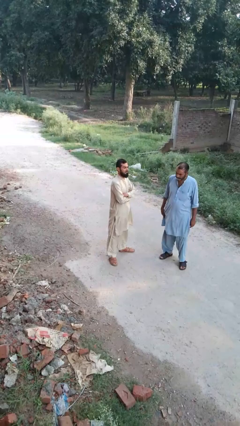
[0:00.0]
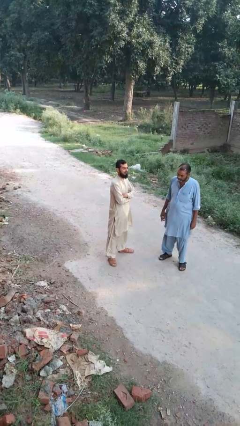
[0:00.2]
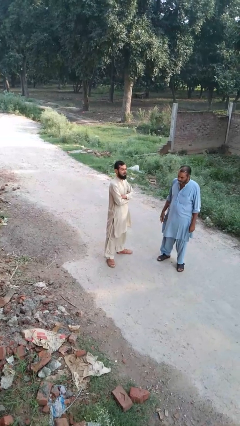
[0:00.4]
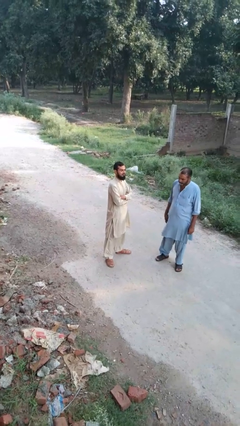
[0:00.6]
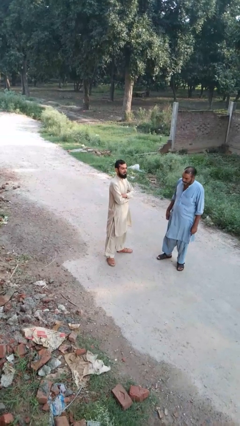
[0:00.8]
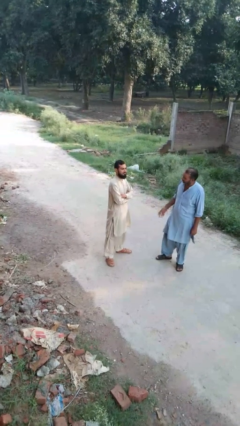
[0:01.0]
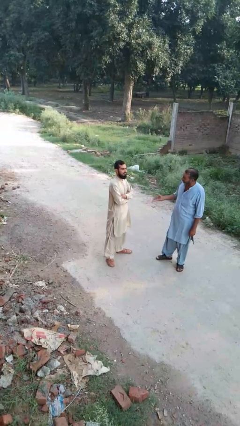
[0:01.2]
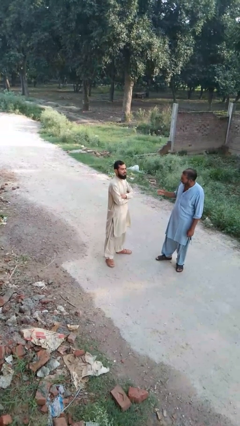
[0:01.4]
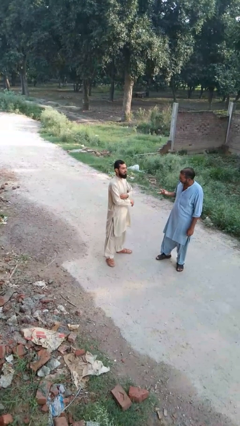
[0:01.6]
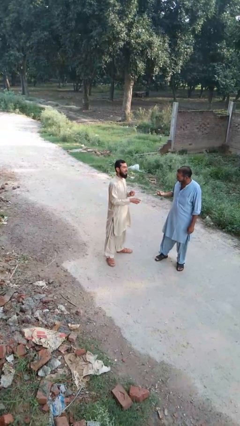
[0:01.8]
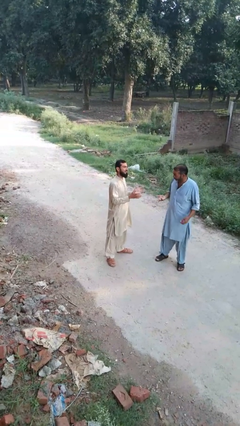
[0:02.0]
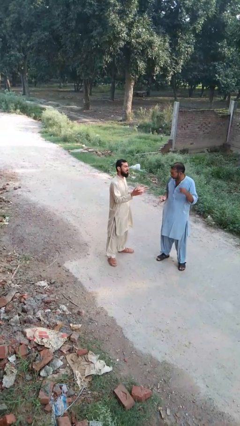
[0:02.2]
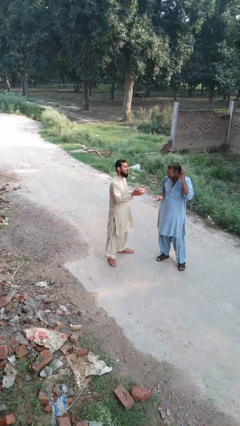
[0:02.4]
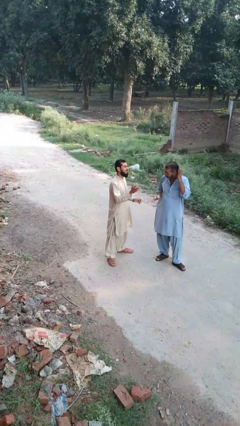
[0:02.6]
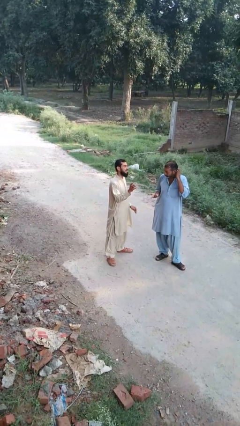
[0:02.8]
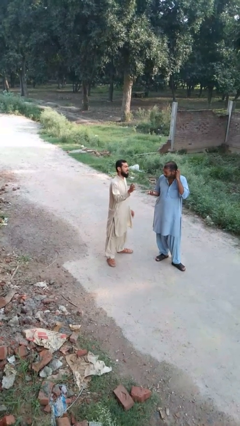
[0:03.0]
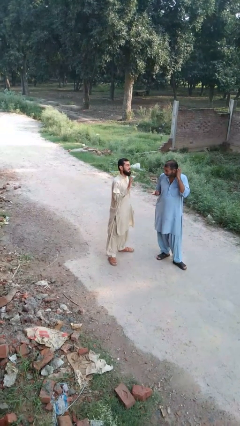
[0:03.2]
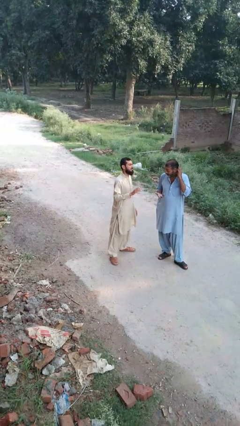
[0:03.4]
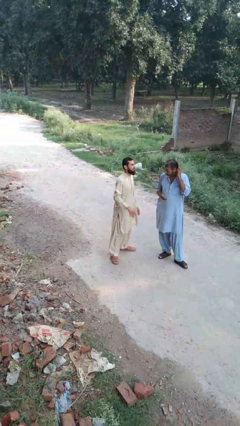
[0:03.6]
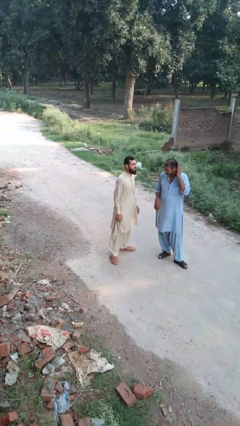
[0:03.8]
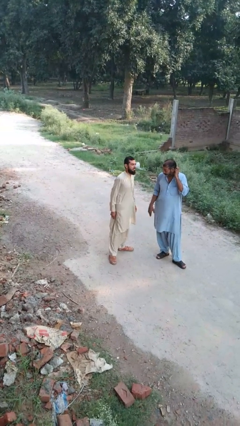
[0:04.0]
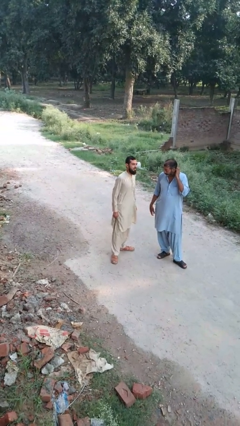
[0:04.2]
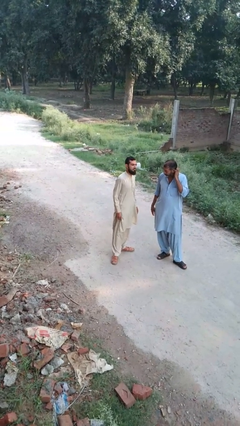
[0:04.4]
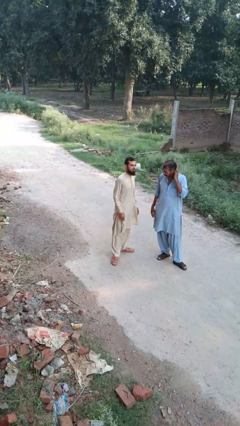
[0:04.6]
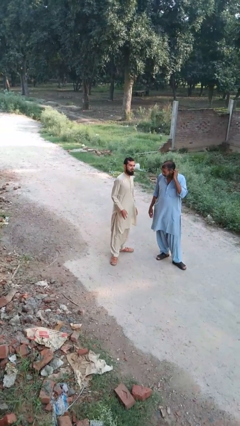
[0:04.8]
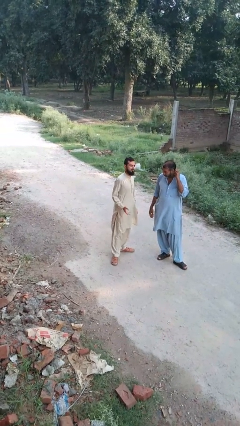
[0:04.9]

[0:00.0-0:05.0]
person talks to person

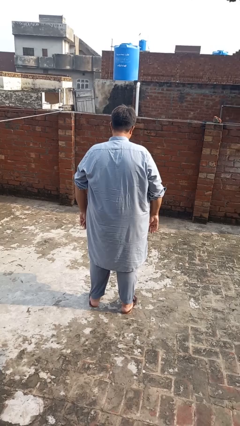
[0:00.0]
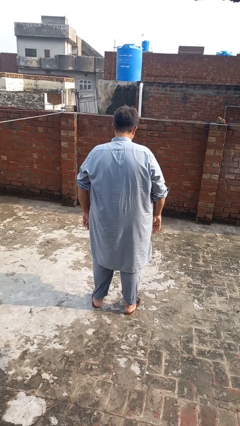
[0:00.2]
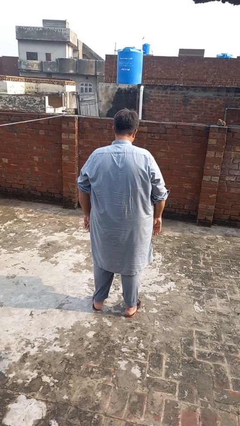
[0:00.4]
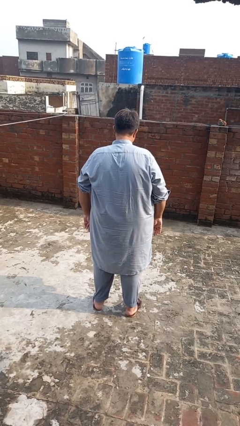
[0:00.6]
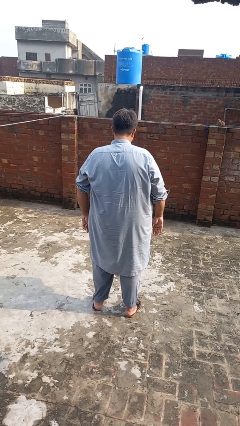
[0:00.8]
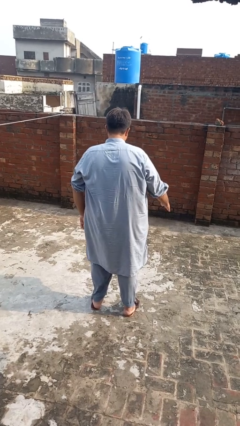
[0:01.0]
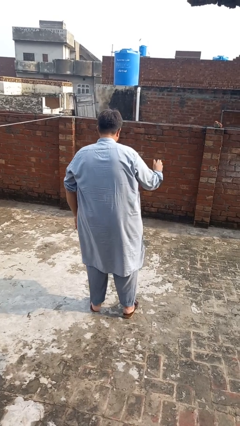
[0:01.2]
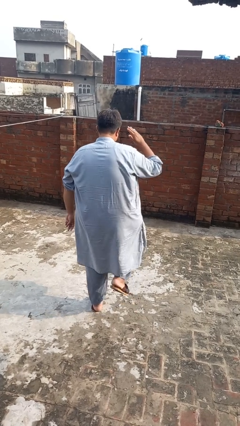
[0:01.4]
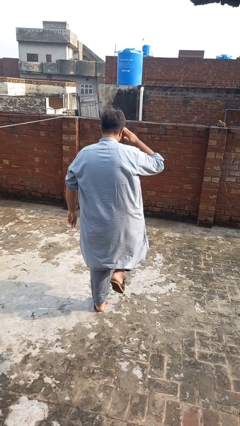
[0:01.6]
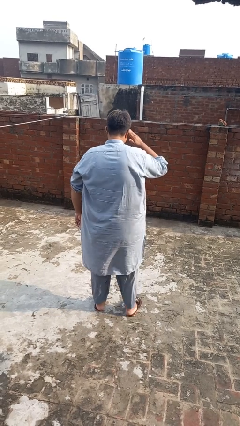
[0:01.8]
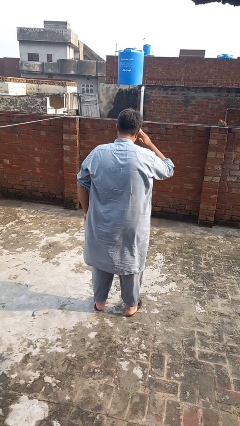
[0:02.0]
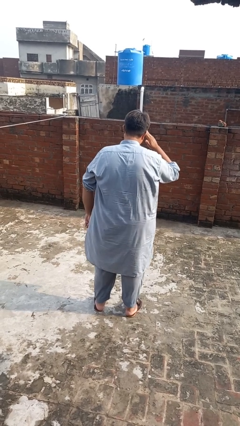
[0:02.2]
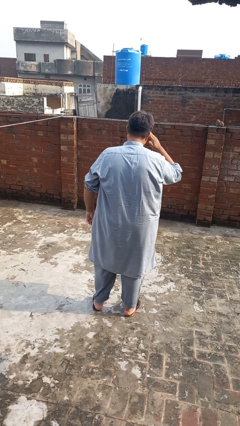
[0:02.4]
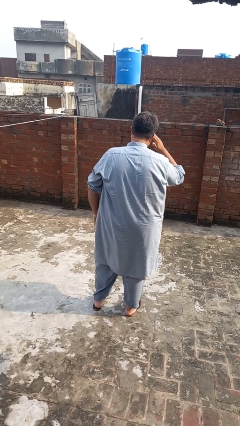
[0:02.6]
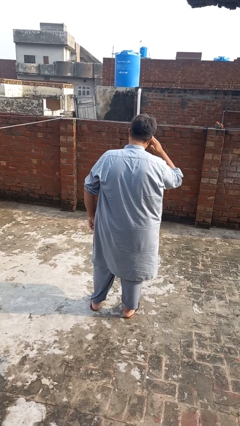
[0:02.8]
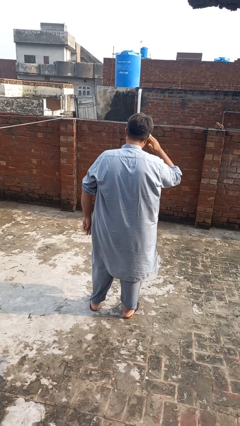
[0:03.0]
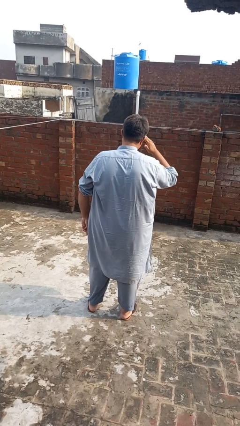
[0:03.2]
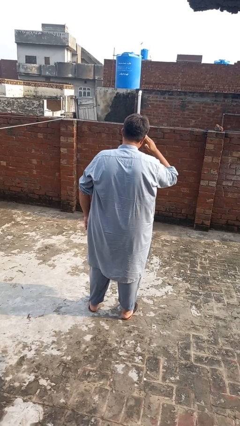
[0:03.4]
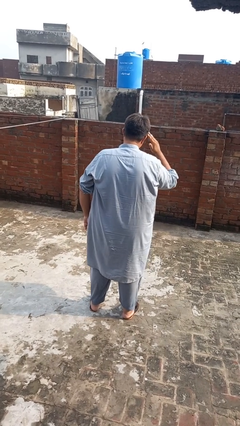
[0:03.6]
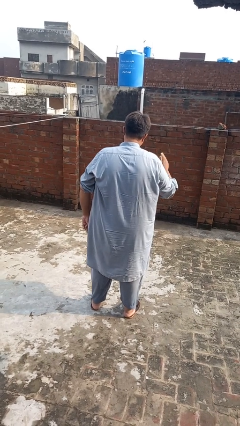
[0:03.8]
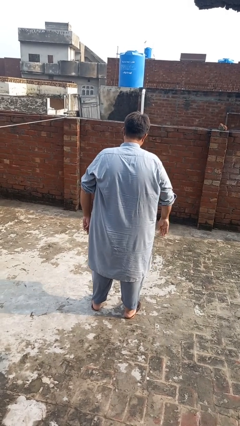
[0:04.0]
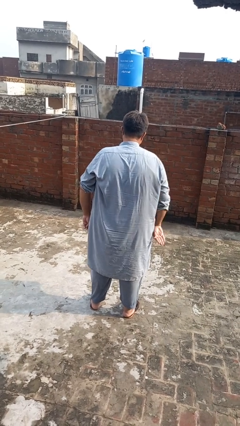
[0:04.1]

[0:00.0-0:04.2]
person salutes

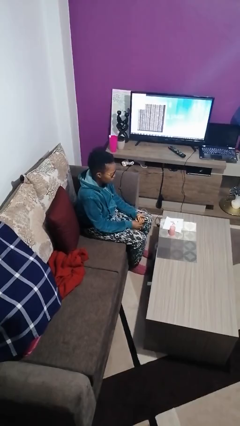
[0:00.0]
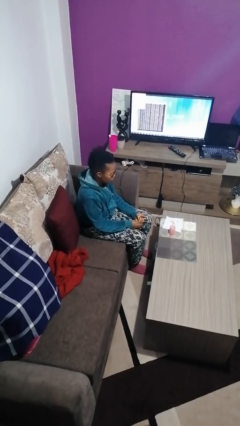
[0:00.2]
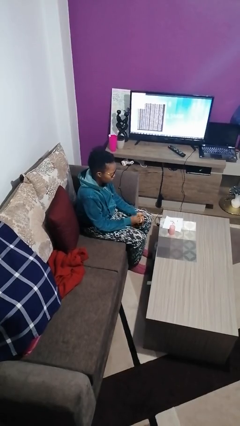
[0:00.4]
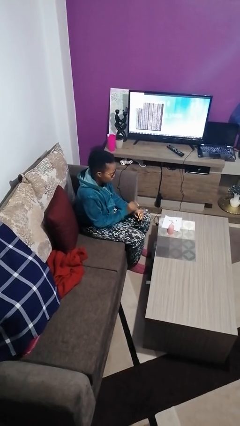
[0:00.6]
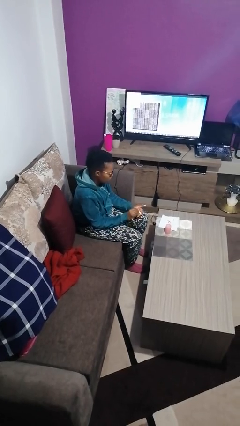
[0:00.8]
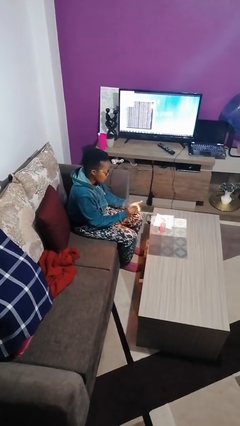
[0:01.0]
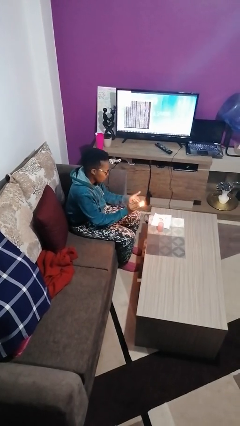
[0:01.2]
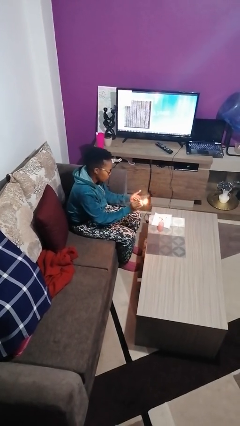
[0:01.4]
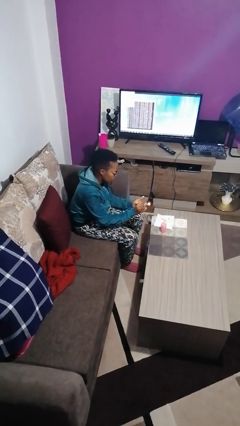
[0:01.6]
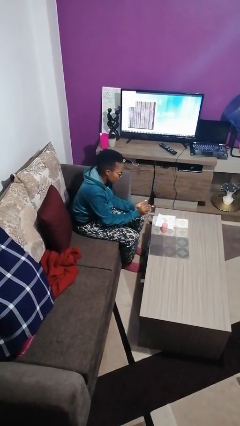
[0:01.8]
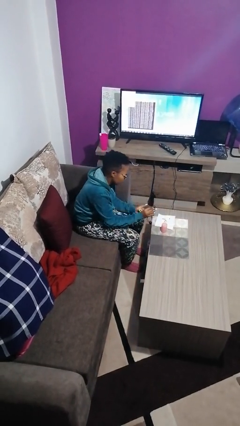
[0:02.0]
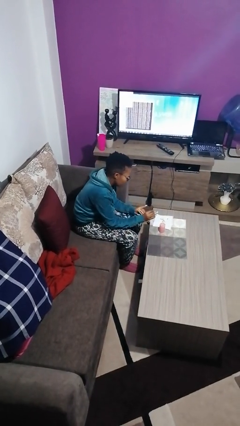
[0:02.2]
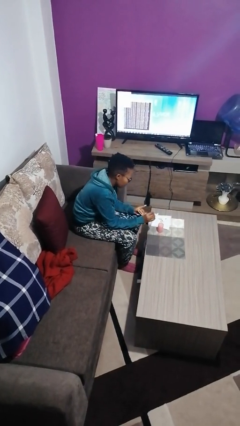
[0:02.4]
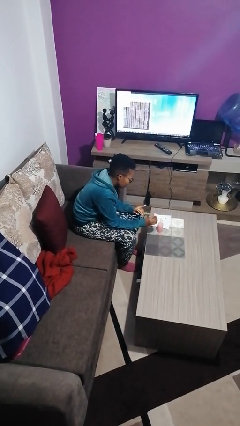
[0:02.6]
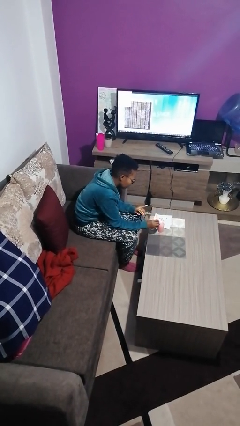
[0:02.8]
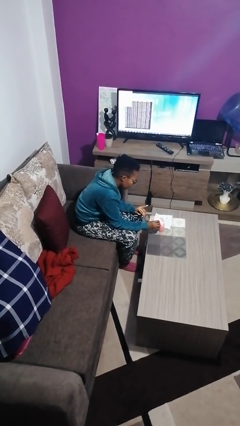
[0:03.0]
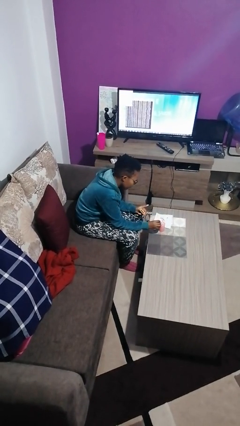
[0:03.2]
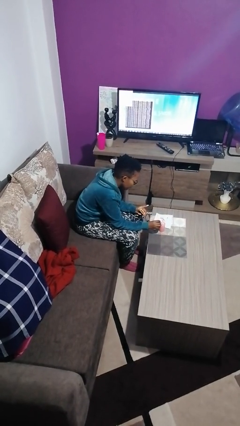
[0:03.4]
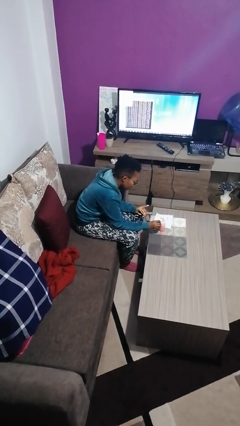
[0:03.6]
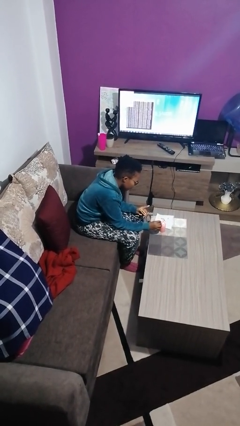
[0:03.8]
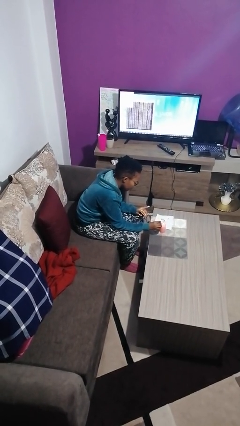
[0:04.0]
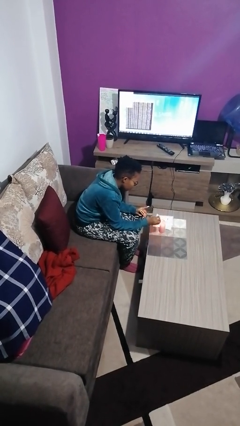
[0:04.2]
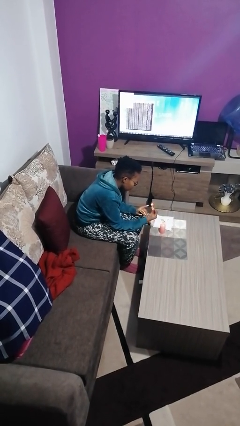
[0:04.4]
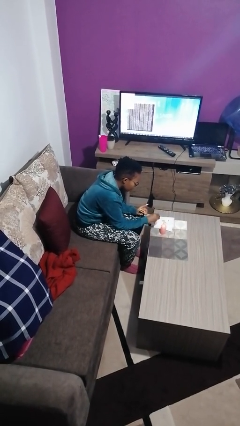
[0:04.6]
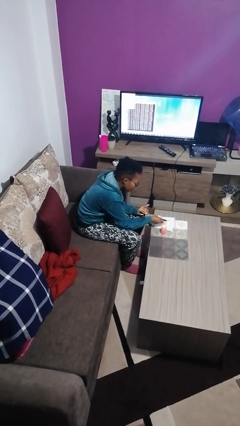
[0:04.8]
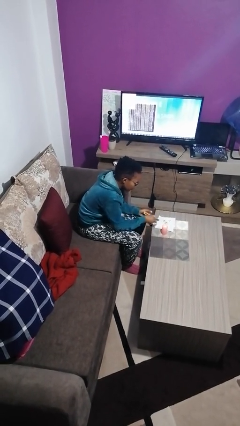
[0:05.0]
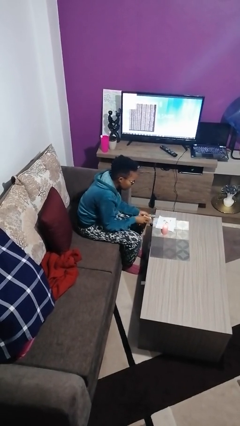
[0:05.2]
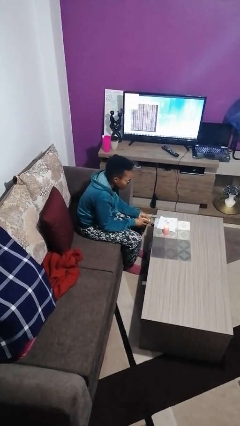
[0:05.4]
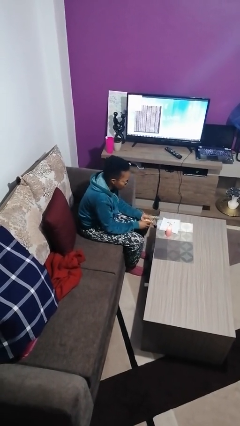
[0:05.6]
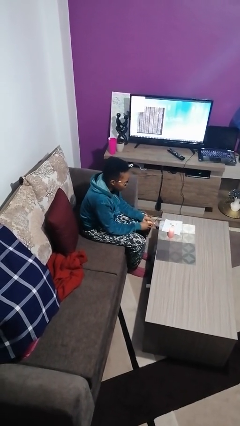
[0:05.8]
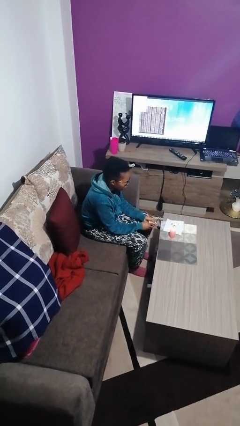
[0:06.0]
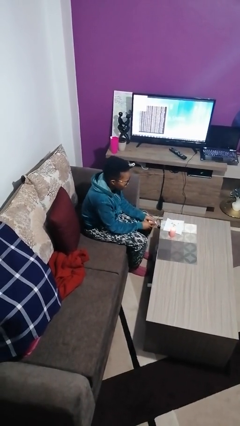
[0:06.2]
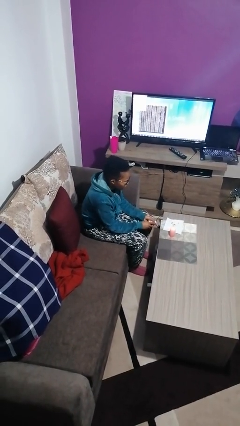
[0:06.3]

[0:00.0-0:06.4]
person lights candle

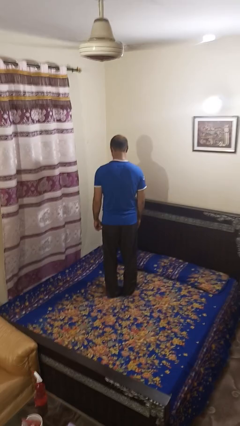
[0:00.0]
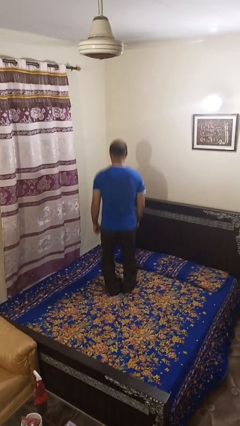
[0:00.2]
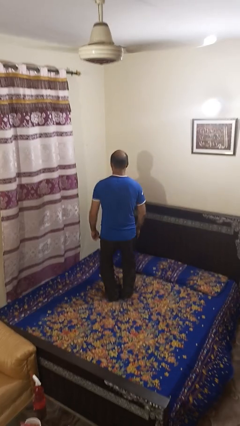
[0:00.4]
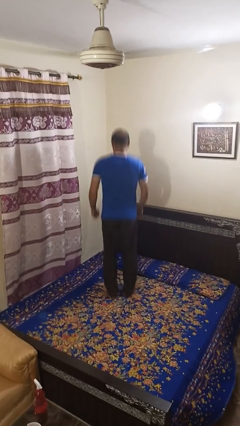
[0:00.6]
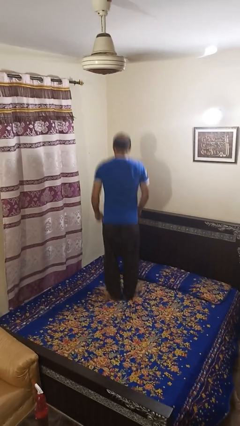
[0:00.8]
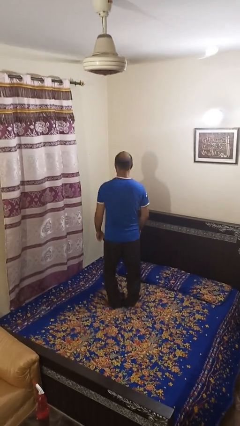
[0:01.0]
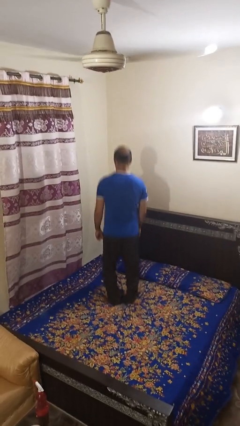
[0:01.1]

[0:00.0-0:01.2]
person jumps on bed

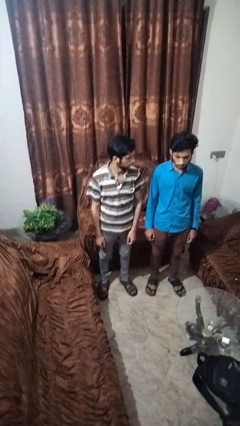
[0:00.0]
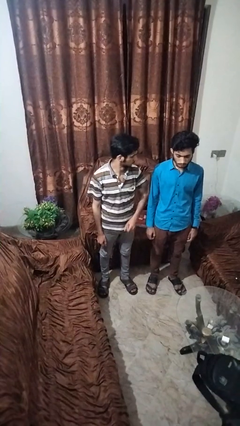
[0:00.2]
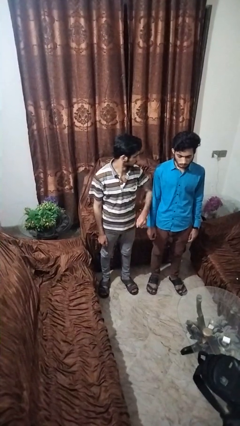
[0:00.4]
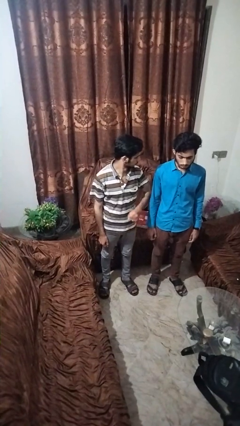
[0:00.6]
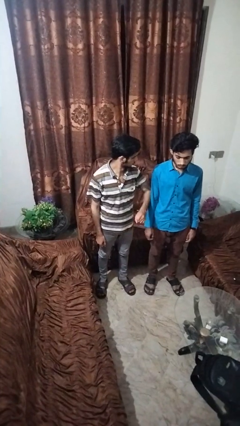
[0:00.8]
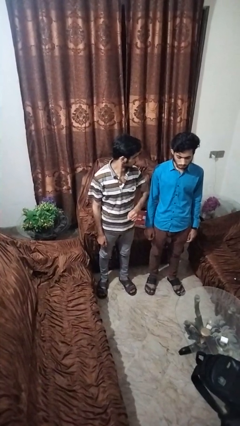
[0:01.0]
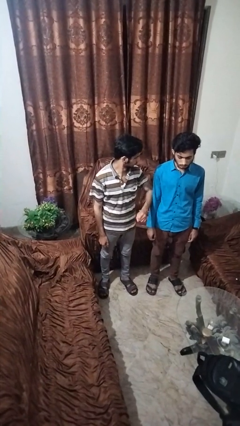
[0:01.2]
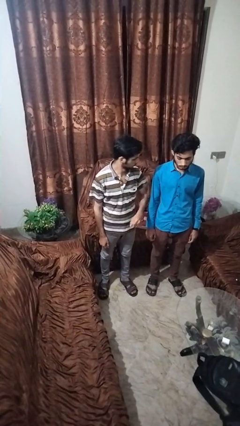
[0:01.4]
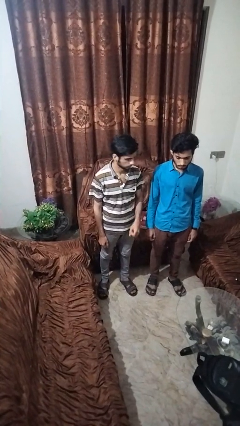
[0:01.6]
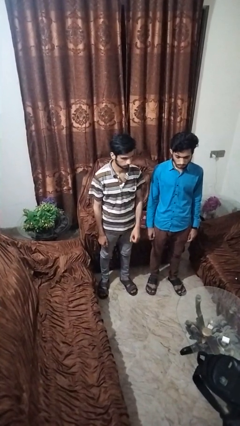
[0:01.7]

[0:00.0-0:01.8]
person nudges person with elbow
